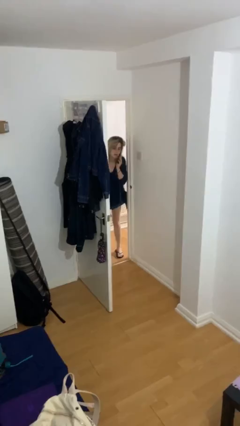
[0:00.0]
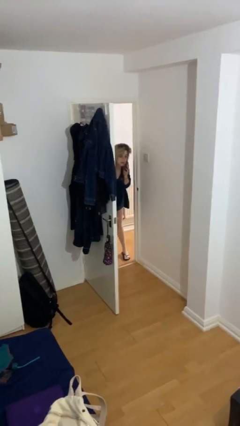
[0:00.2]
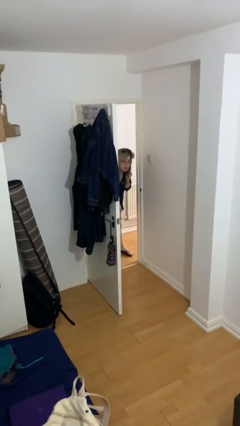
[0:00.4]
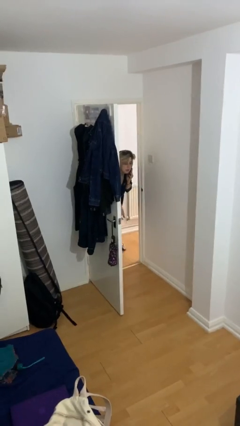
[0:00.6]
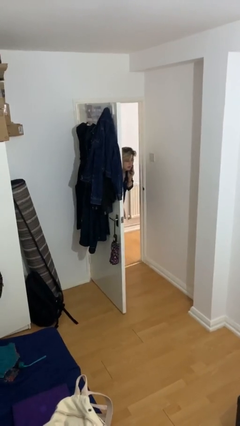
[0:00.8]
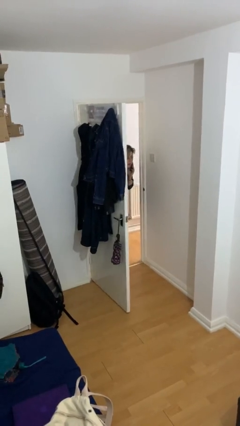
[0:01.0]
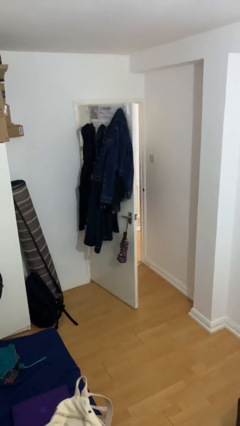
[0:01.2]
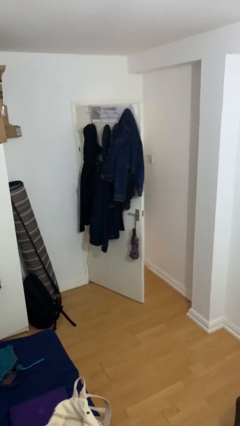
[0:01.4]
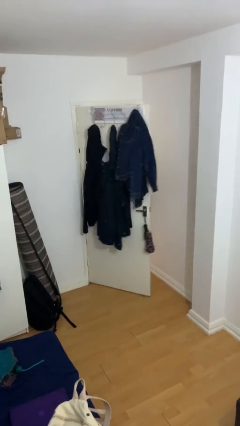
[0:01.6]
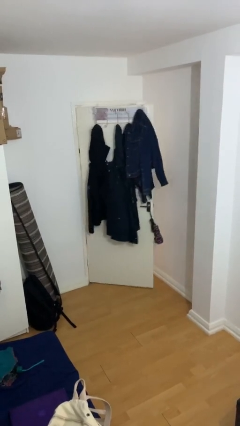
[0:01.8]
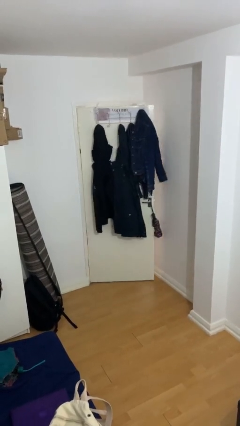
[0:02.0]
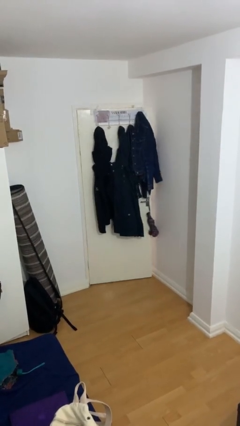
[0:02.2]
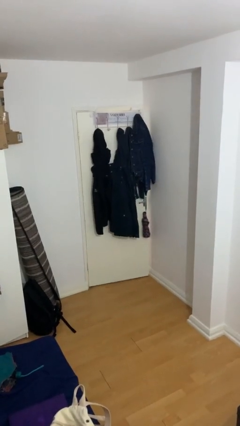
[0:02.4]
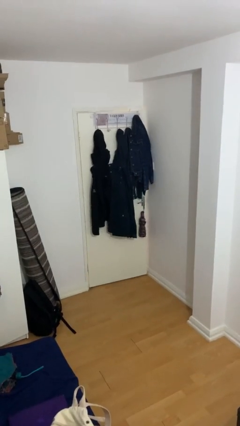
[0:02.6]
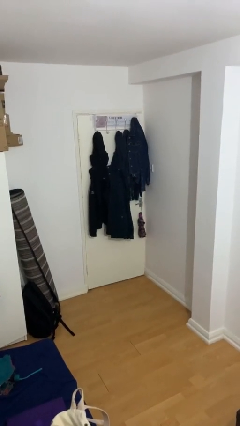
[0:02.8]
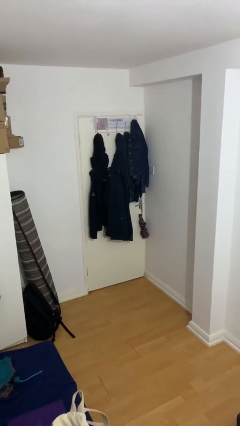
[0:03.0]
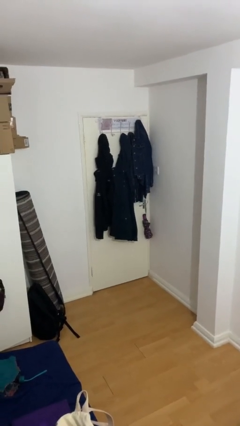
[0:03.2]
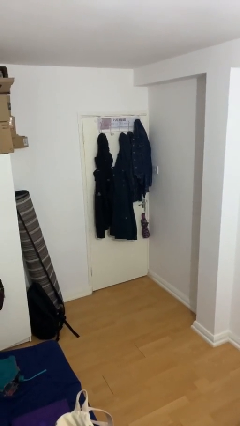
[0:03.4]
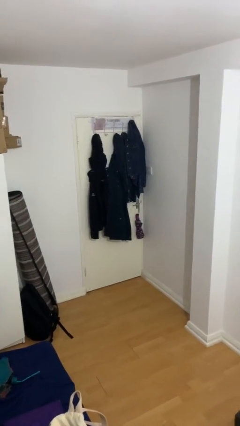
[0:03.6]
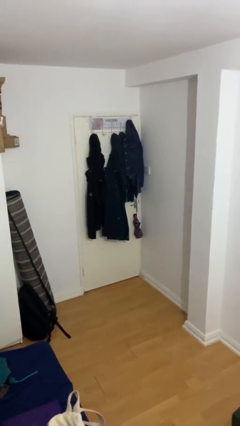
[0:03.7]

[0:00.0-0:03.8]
person closes facility door

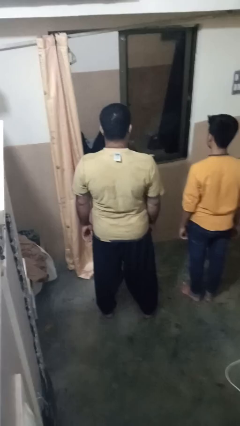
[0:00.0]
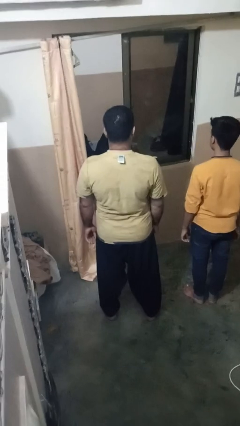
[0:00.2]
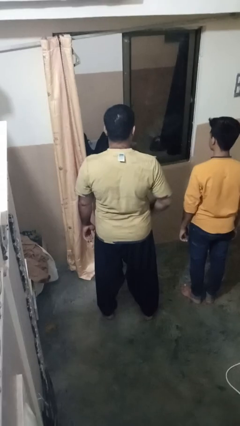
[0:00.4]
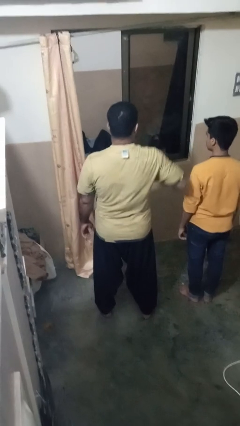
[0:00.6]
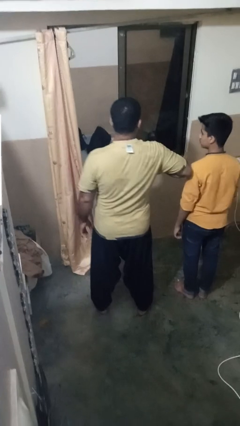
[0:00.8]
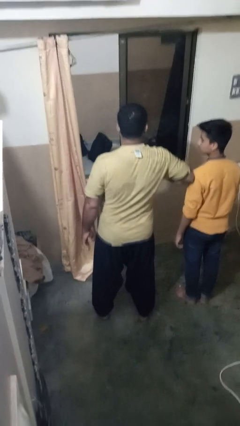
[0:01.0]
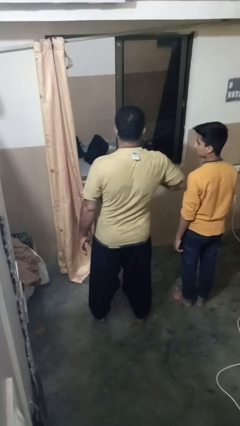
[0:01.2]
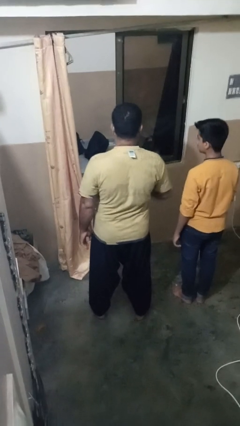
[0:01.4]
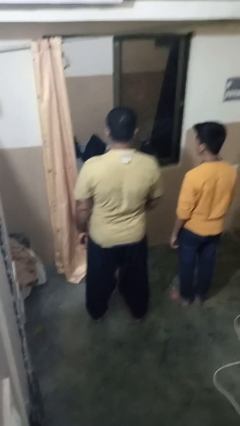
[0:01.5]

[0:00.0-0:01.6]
person nudges person with elbow

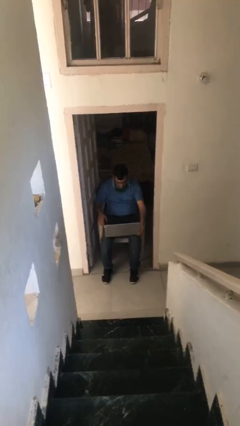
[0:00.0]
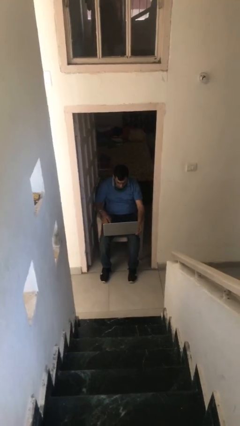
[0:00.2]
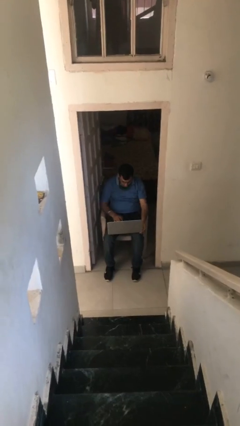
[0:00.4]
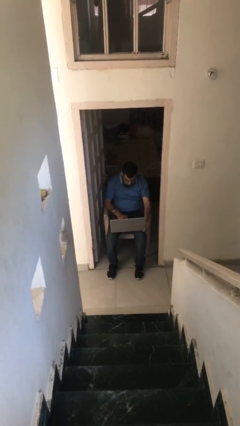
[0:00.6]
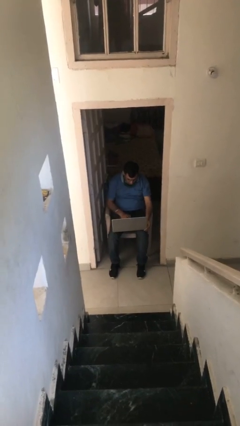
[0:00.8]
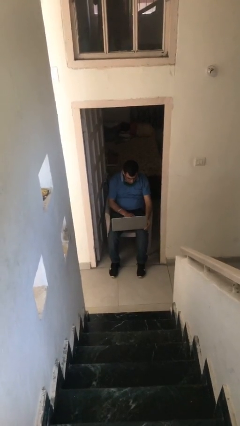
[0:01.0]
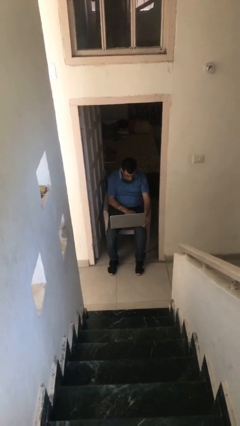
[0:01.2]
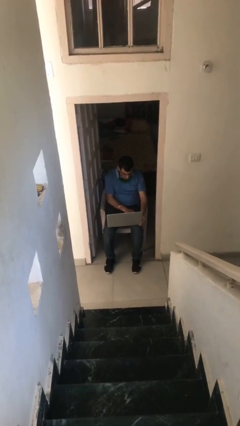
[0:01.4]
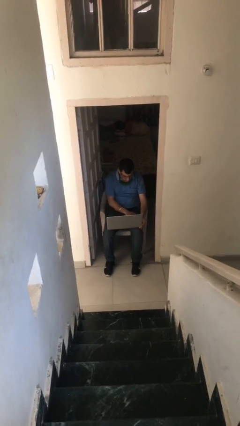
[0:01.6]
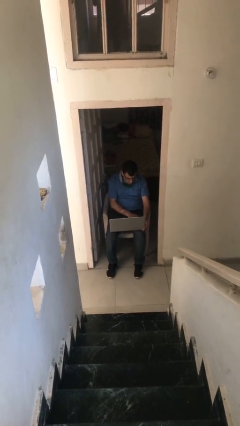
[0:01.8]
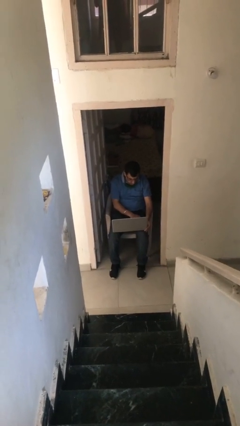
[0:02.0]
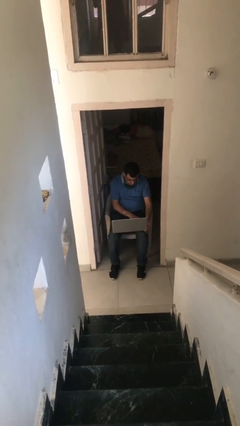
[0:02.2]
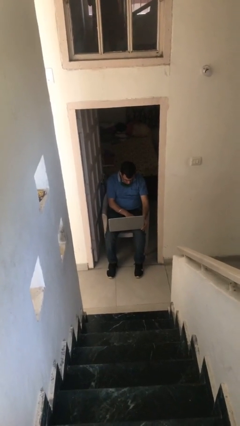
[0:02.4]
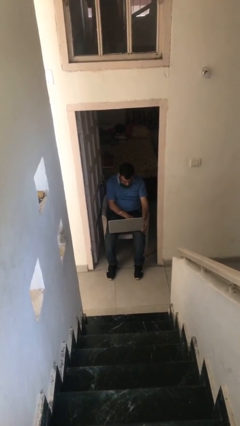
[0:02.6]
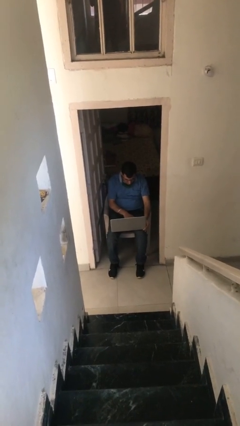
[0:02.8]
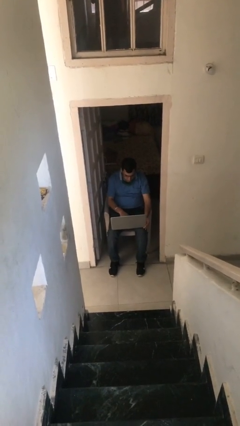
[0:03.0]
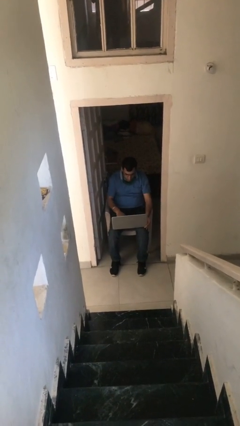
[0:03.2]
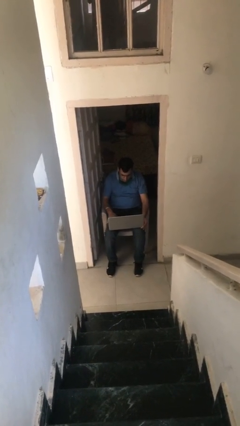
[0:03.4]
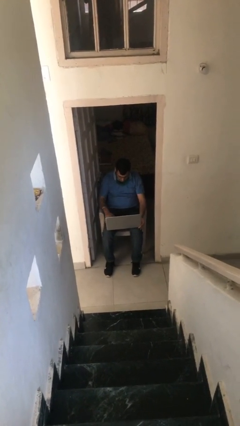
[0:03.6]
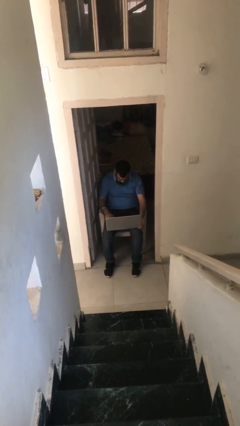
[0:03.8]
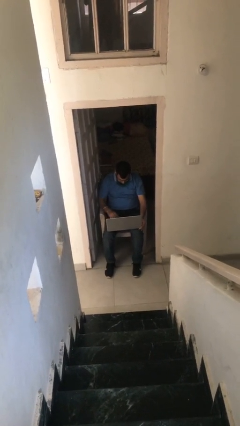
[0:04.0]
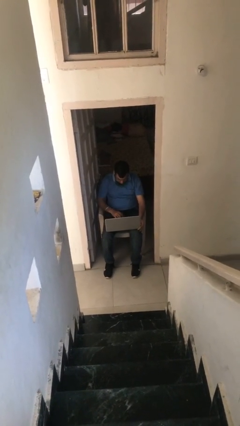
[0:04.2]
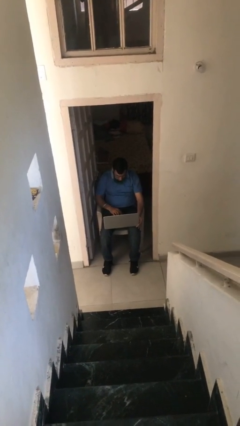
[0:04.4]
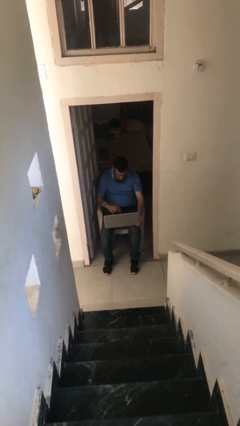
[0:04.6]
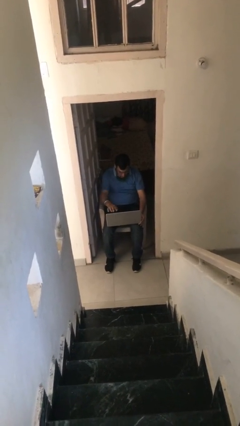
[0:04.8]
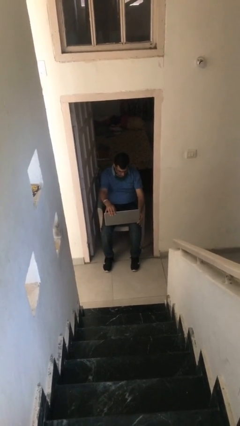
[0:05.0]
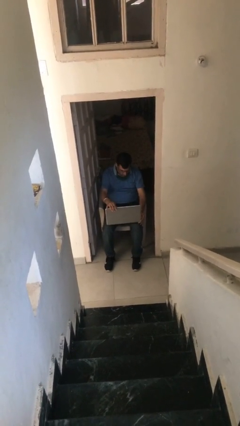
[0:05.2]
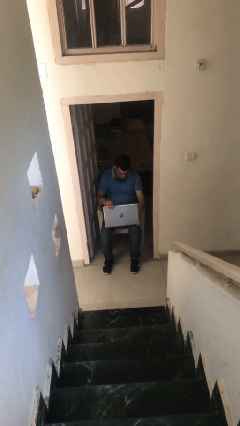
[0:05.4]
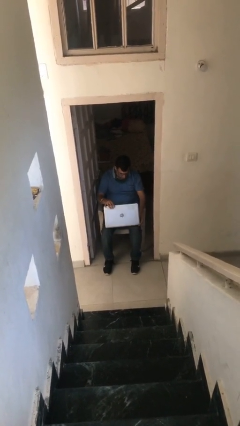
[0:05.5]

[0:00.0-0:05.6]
person interacts with laptop

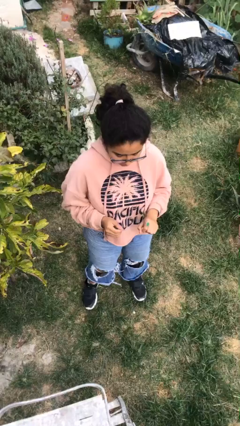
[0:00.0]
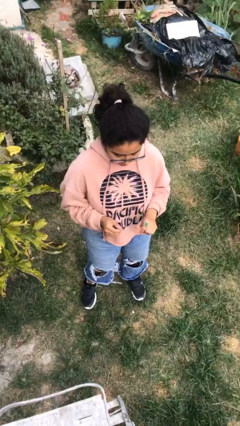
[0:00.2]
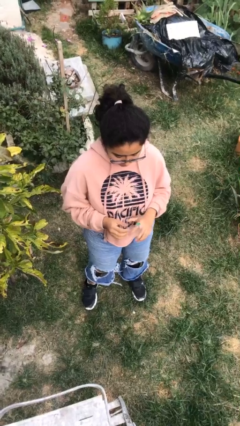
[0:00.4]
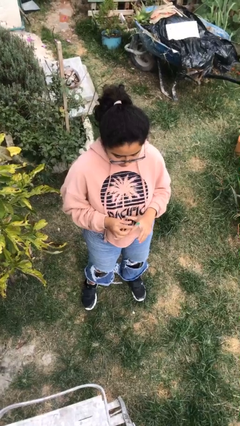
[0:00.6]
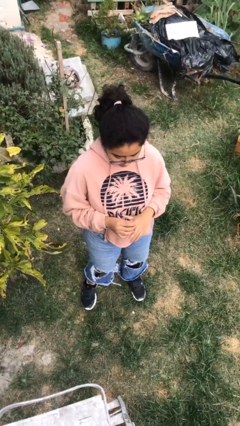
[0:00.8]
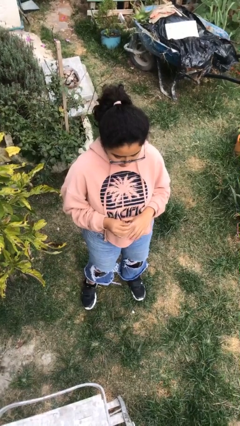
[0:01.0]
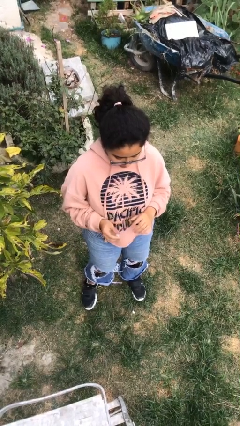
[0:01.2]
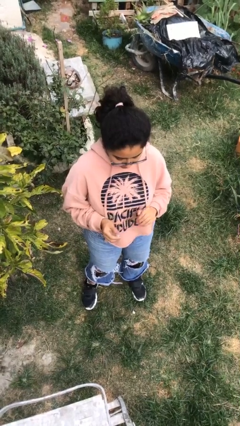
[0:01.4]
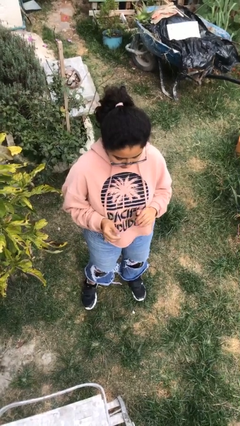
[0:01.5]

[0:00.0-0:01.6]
person takes off ring

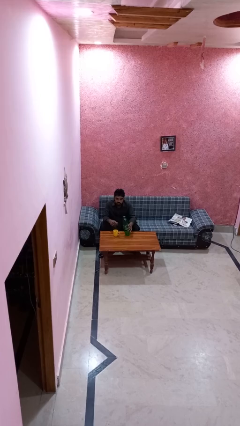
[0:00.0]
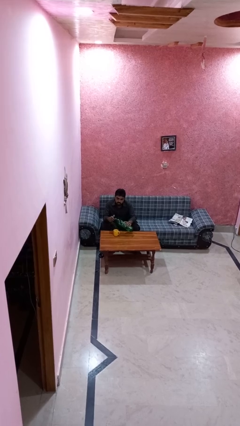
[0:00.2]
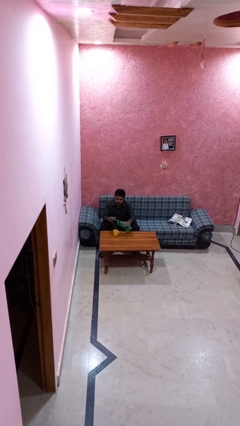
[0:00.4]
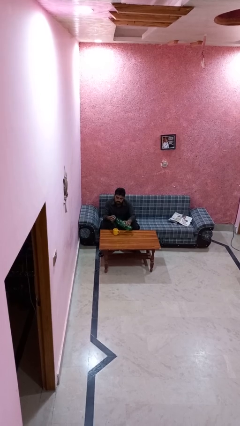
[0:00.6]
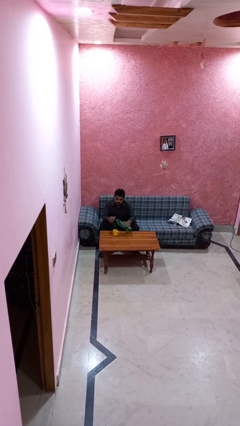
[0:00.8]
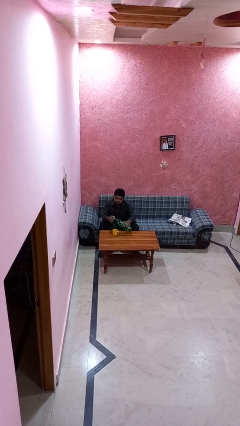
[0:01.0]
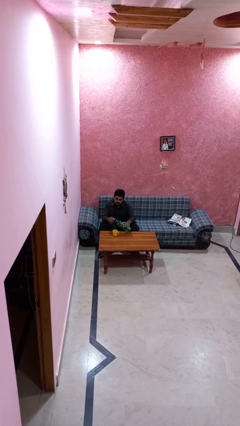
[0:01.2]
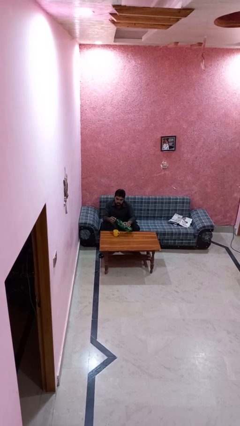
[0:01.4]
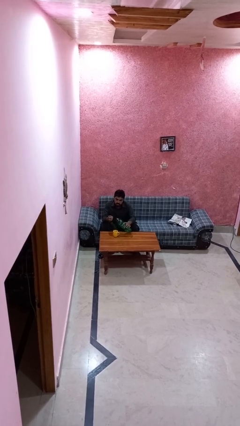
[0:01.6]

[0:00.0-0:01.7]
person unscrews lid from bottle

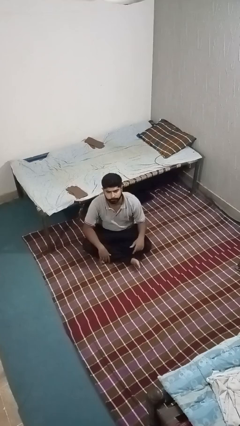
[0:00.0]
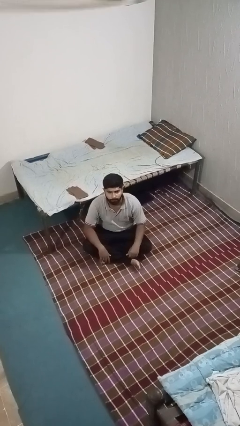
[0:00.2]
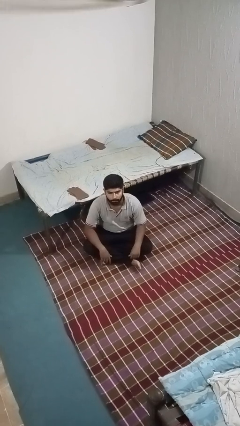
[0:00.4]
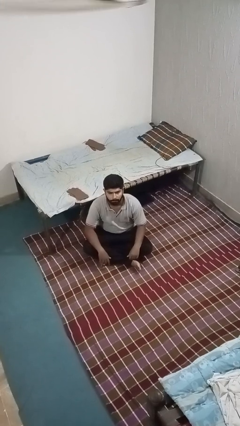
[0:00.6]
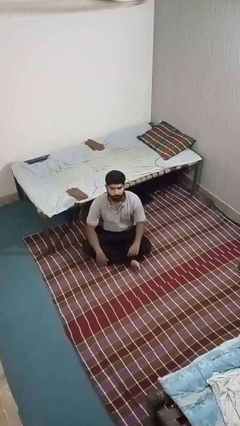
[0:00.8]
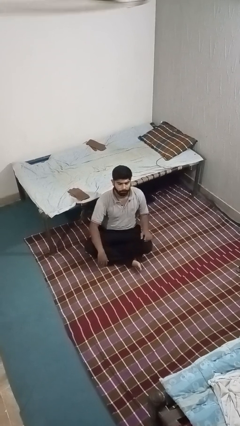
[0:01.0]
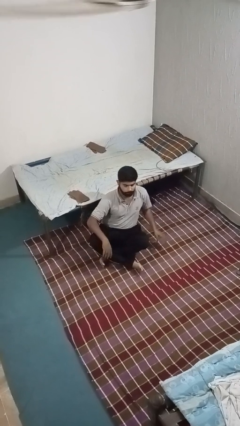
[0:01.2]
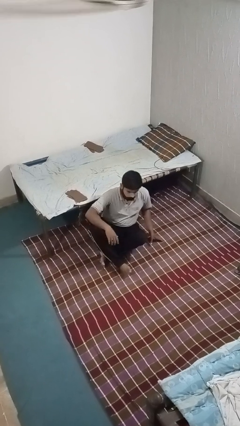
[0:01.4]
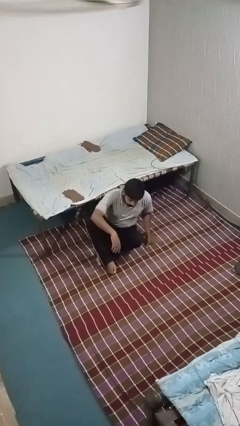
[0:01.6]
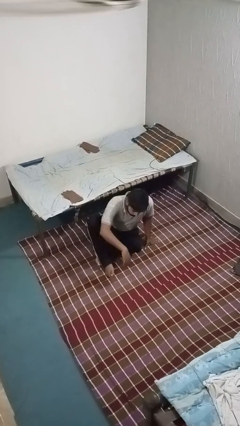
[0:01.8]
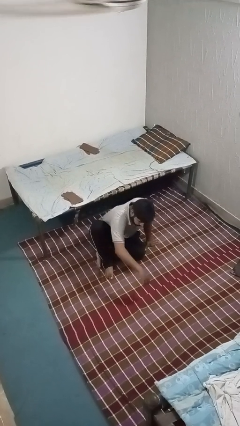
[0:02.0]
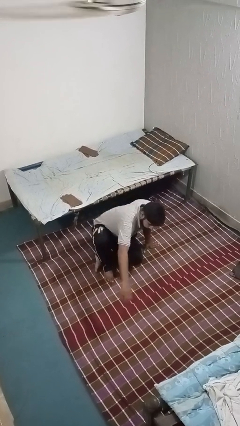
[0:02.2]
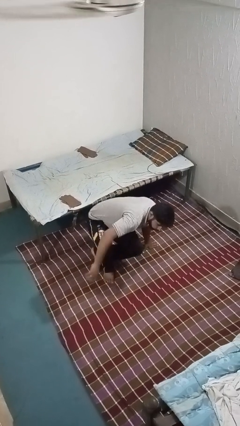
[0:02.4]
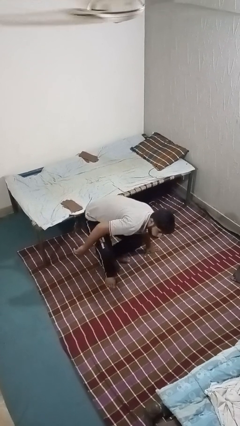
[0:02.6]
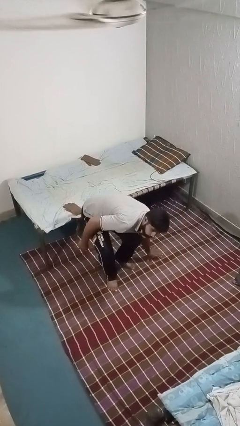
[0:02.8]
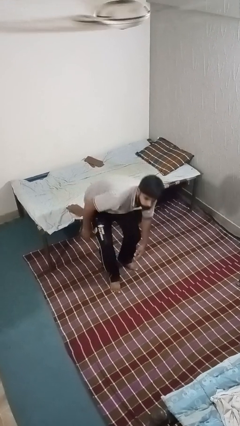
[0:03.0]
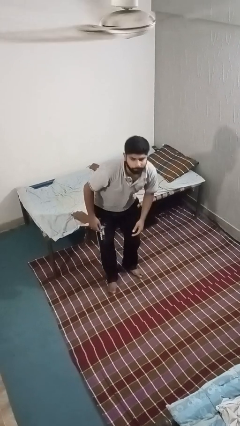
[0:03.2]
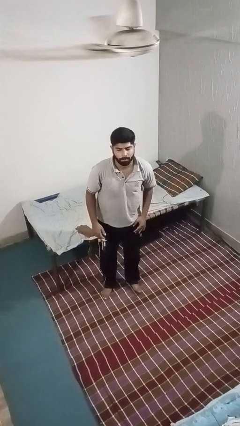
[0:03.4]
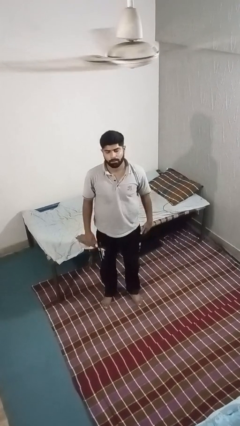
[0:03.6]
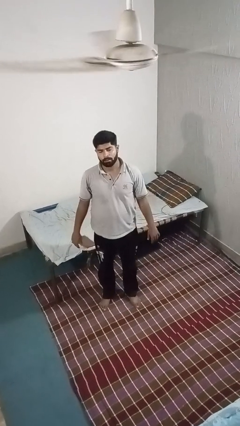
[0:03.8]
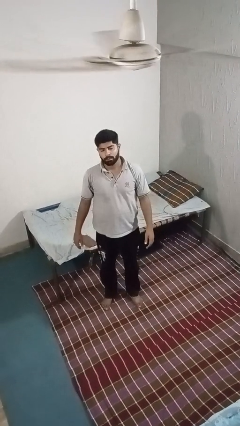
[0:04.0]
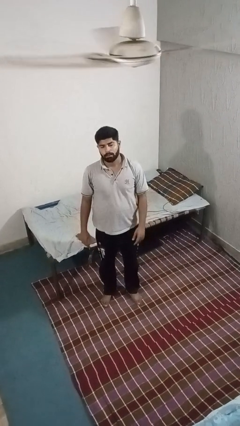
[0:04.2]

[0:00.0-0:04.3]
person stands up from floor
